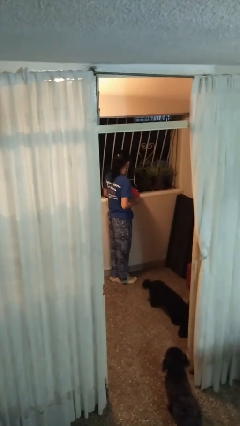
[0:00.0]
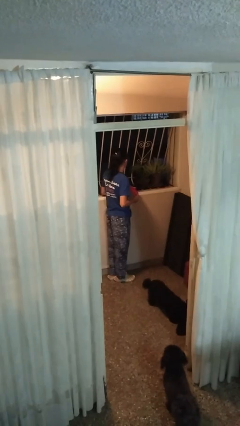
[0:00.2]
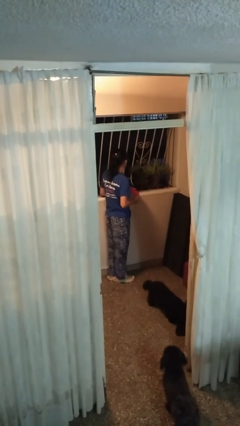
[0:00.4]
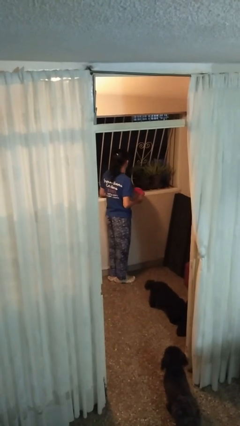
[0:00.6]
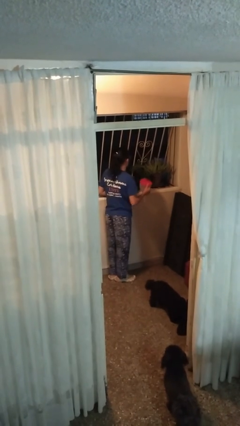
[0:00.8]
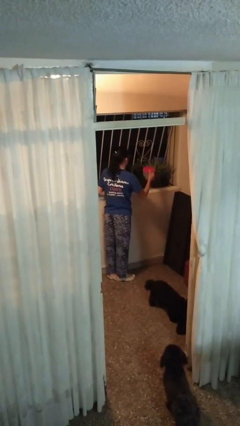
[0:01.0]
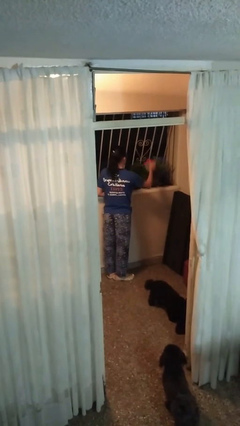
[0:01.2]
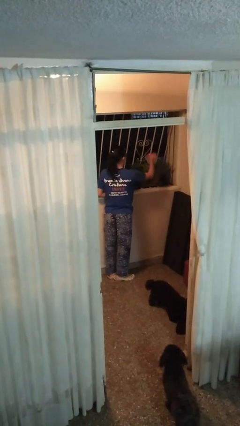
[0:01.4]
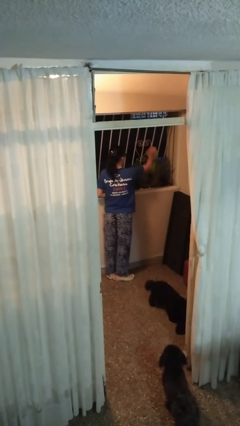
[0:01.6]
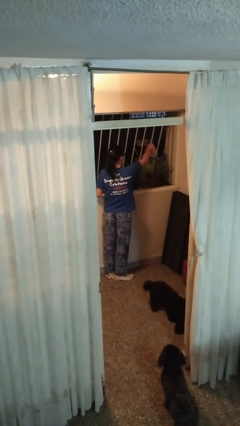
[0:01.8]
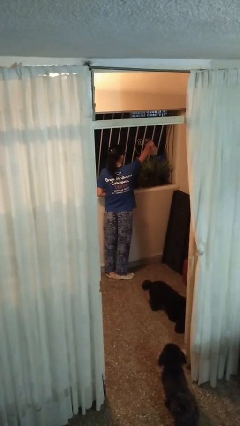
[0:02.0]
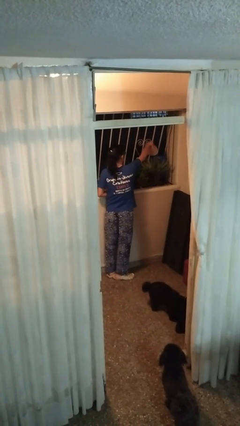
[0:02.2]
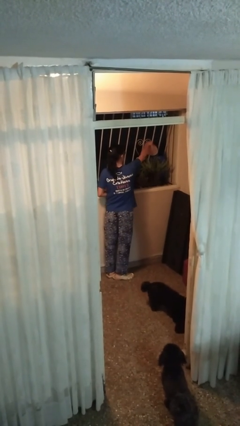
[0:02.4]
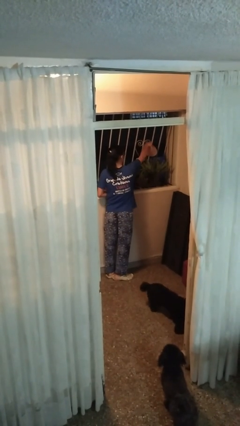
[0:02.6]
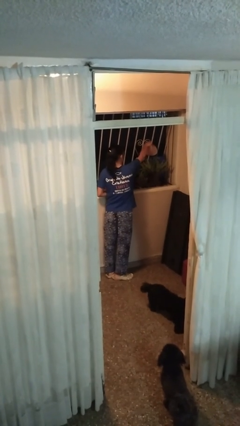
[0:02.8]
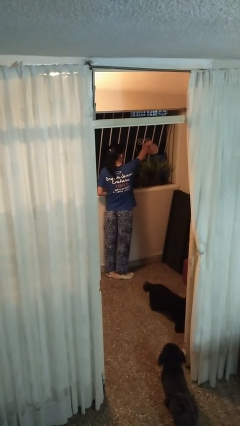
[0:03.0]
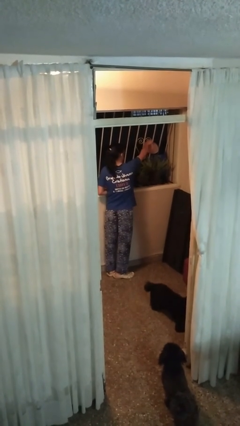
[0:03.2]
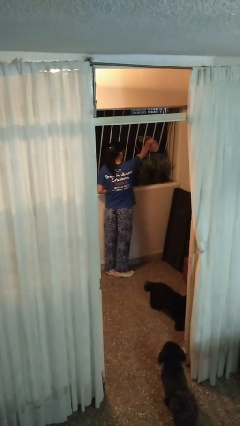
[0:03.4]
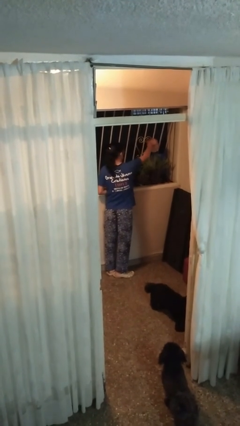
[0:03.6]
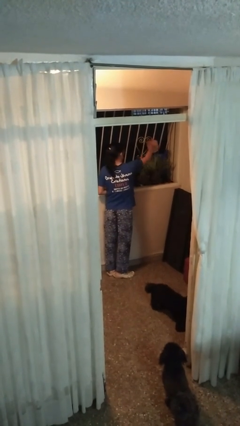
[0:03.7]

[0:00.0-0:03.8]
person waters houseplant

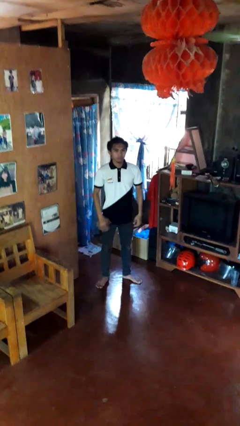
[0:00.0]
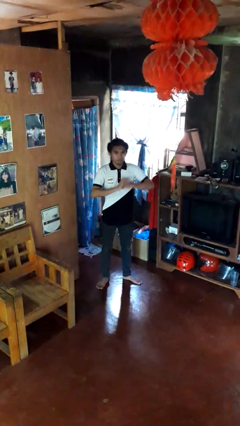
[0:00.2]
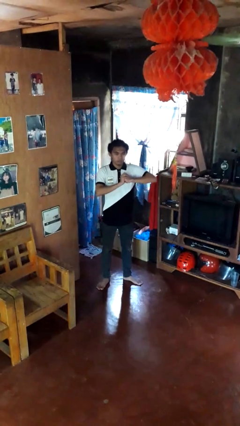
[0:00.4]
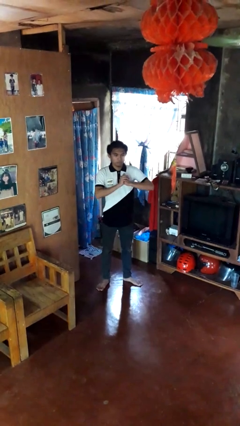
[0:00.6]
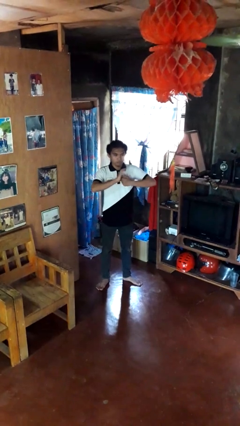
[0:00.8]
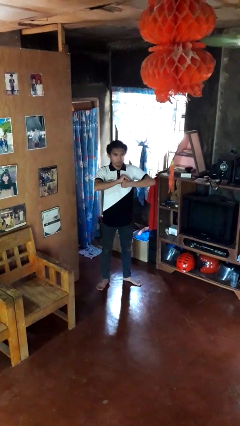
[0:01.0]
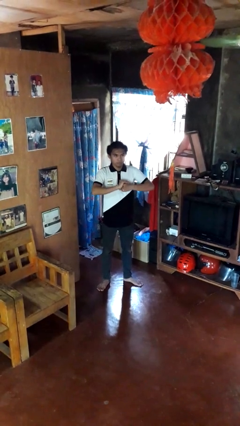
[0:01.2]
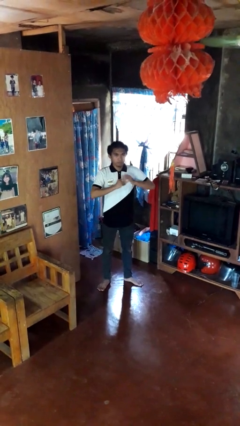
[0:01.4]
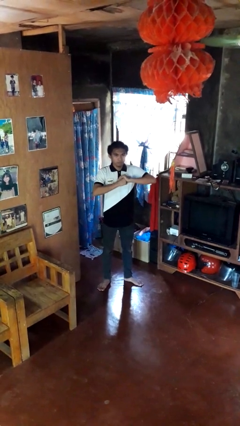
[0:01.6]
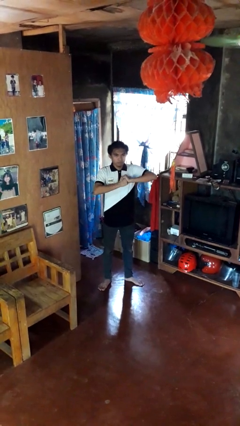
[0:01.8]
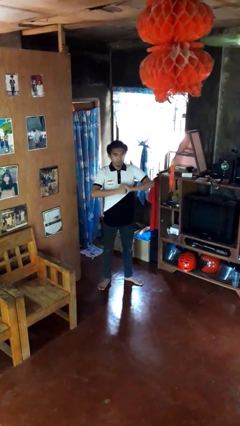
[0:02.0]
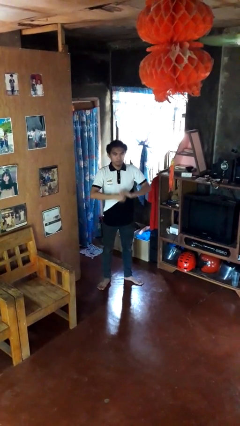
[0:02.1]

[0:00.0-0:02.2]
person cracks knuckles

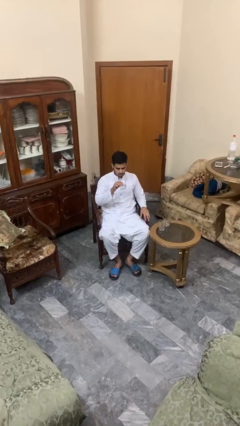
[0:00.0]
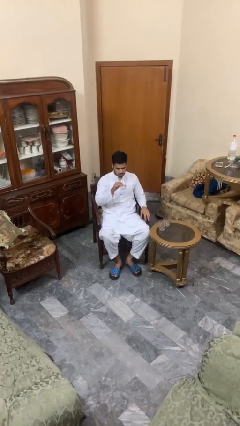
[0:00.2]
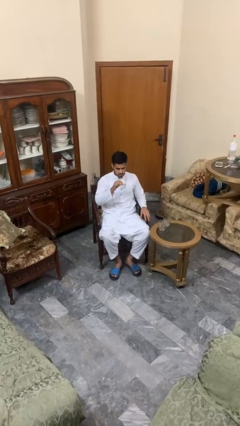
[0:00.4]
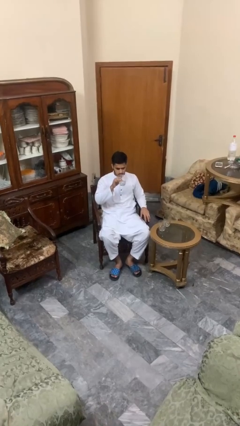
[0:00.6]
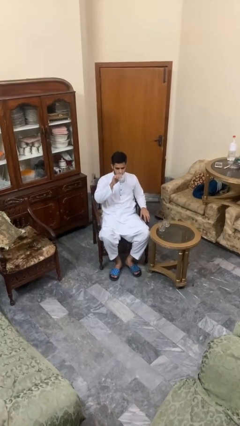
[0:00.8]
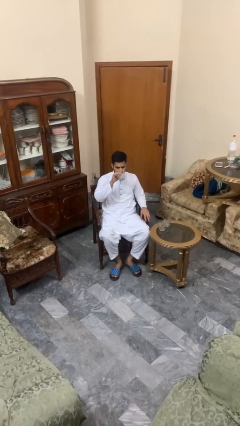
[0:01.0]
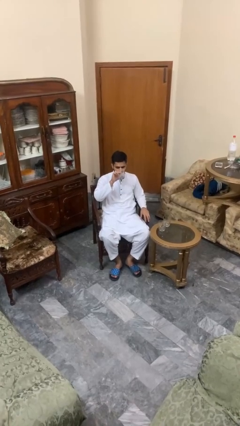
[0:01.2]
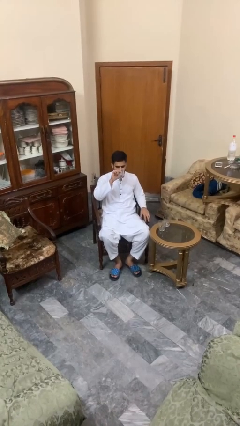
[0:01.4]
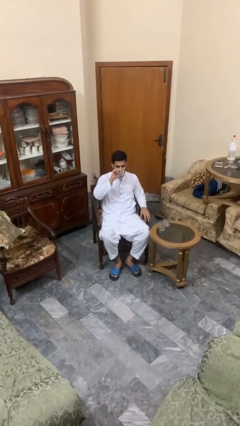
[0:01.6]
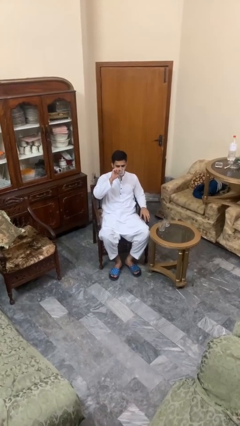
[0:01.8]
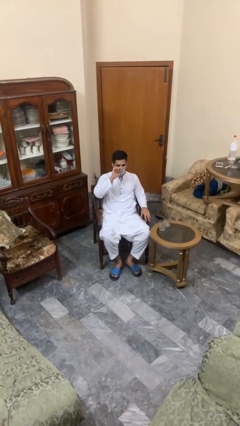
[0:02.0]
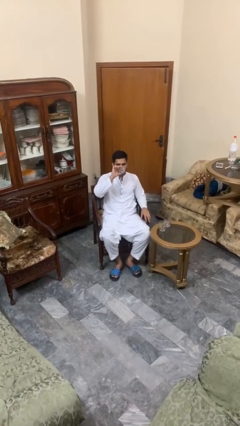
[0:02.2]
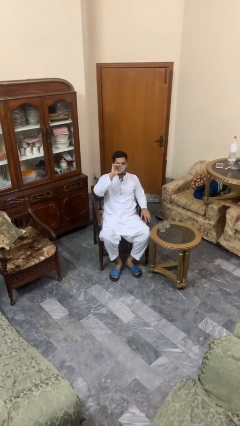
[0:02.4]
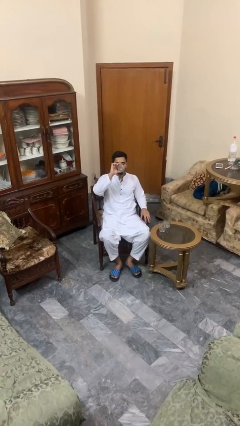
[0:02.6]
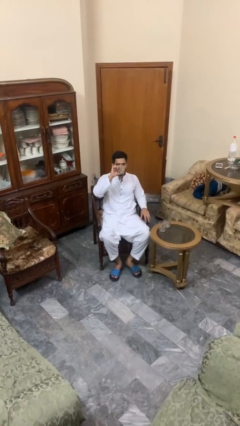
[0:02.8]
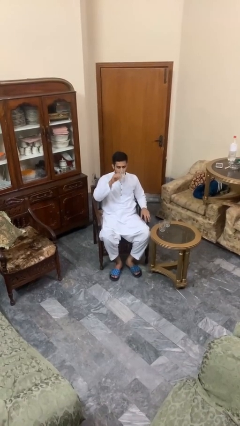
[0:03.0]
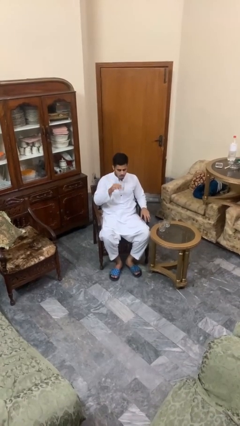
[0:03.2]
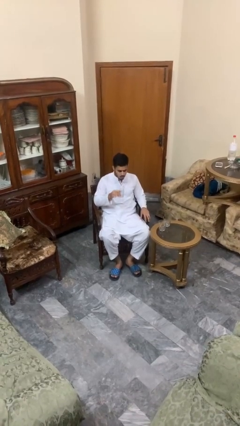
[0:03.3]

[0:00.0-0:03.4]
person drinks from shotglass

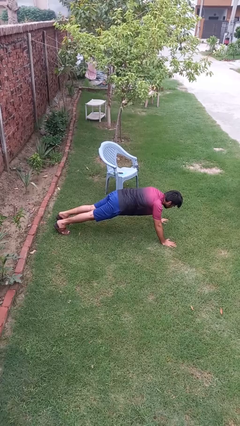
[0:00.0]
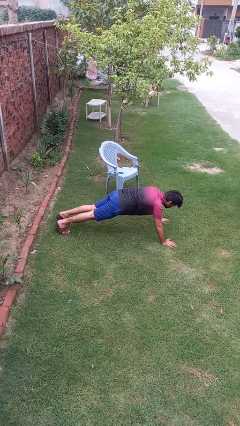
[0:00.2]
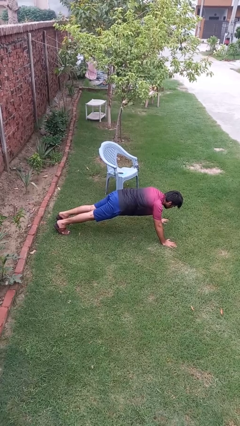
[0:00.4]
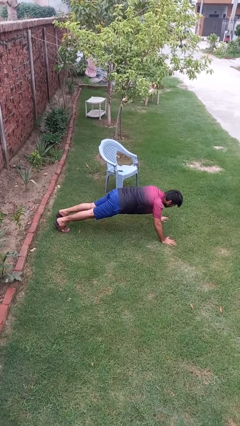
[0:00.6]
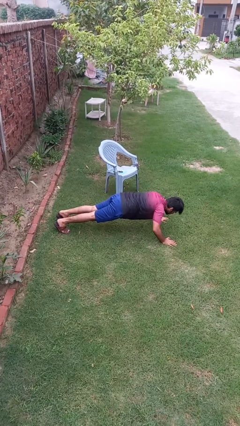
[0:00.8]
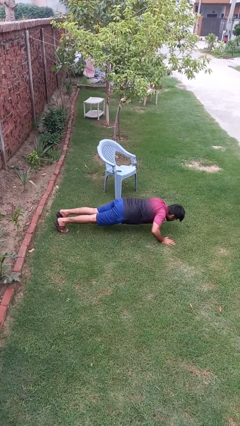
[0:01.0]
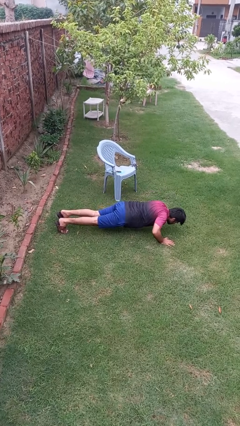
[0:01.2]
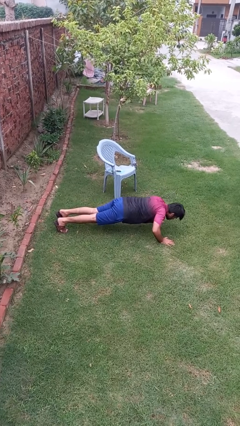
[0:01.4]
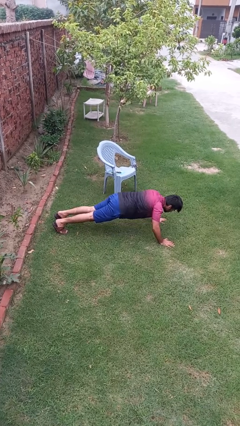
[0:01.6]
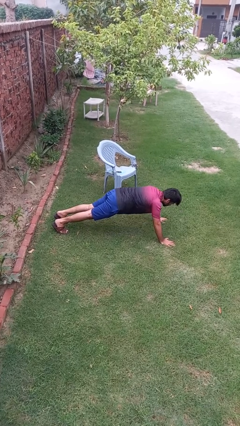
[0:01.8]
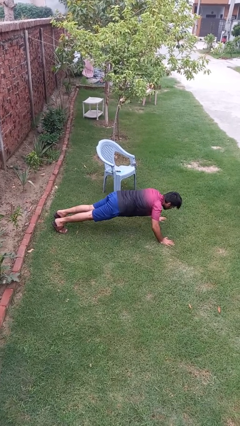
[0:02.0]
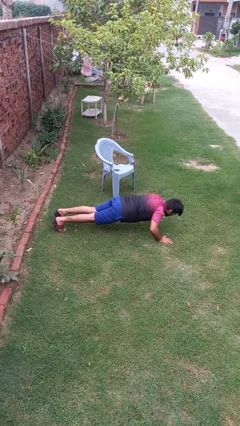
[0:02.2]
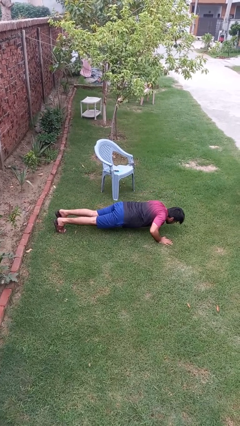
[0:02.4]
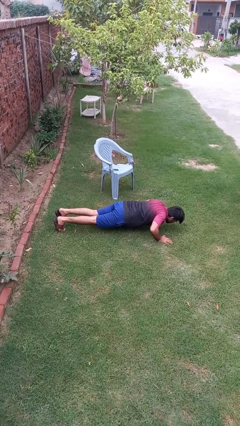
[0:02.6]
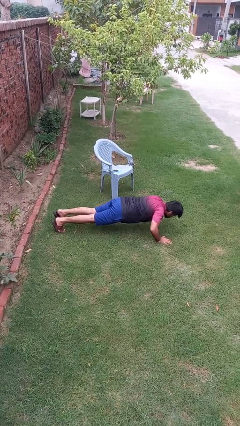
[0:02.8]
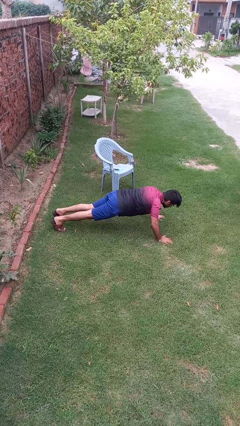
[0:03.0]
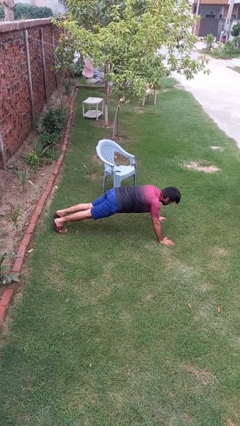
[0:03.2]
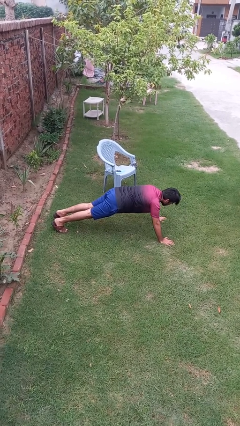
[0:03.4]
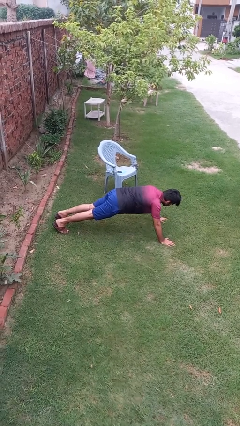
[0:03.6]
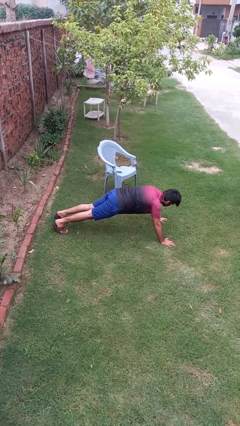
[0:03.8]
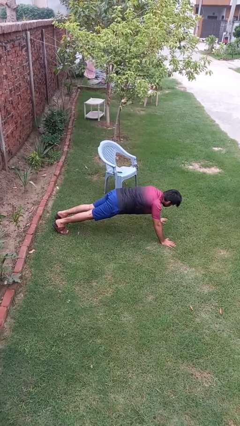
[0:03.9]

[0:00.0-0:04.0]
person exercises with pushup

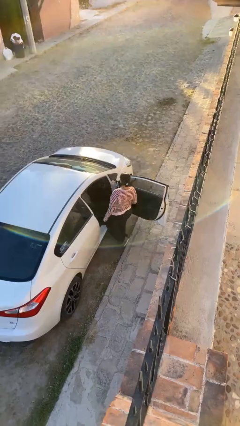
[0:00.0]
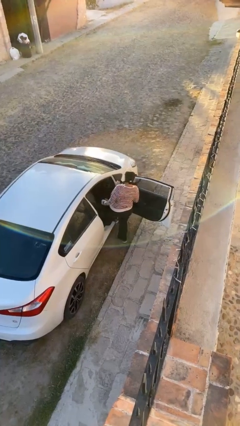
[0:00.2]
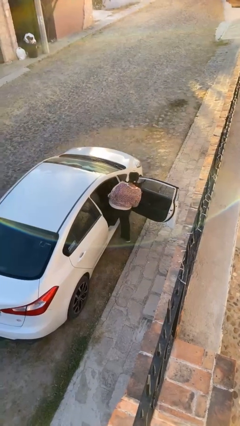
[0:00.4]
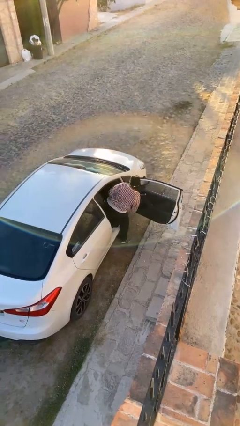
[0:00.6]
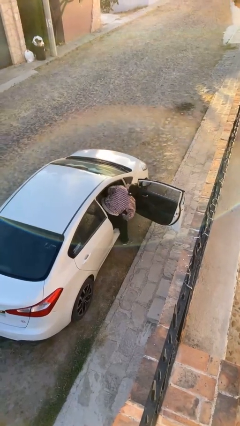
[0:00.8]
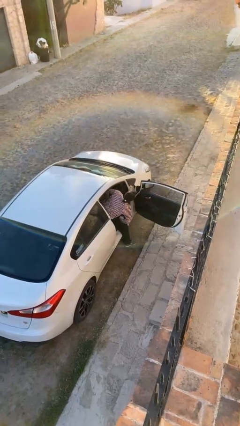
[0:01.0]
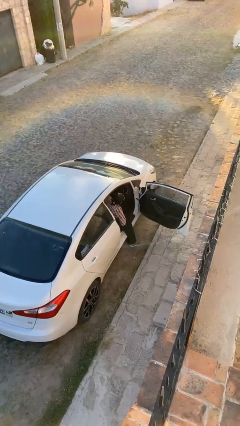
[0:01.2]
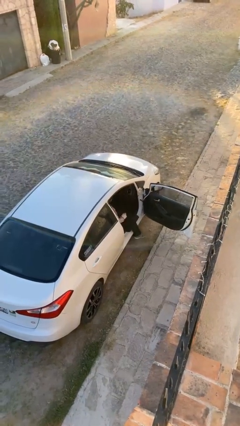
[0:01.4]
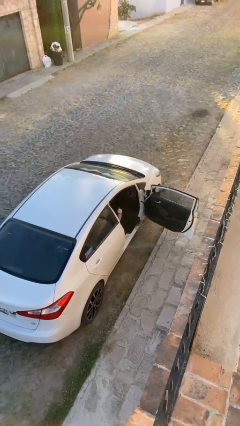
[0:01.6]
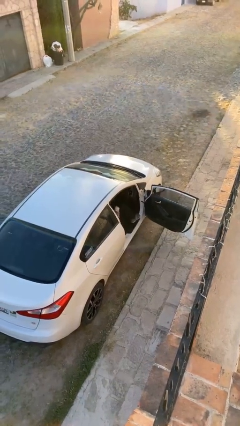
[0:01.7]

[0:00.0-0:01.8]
person enters car

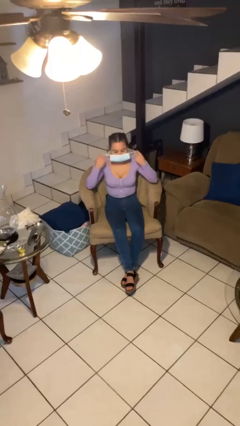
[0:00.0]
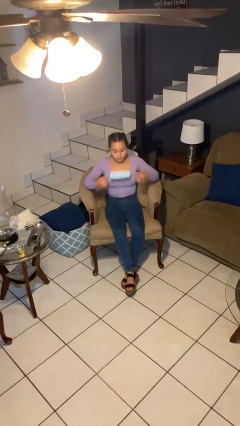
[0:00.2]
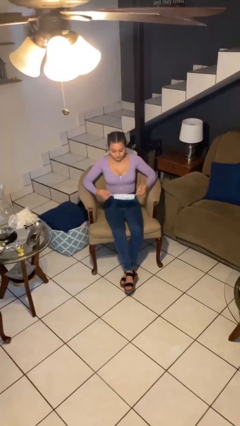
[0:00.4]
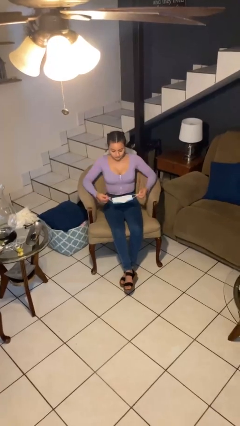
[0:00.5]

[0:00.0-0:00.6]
person takes off facemask

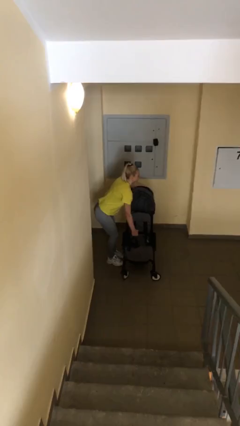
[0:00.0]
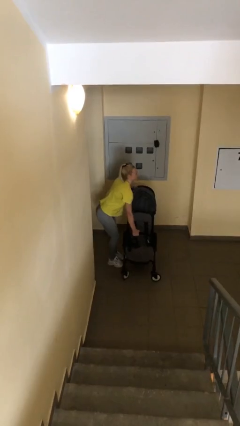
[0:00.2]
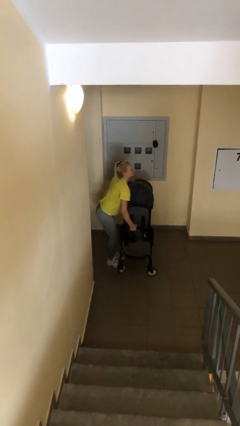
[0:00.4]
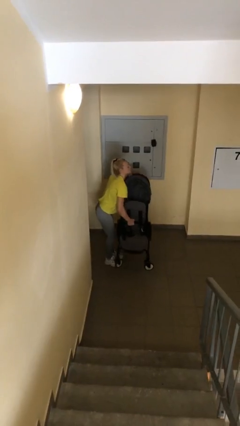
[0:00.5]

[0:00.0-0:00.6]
person picks up object from floor

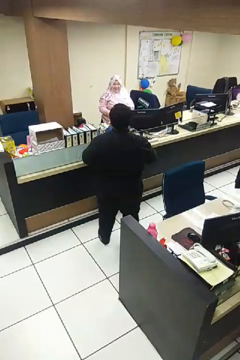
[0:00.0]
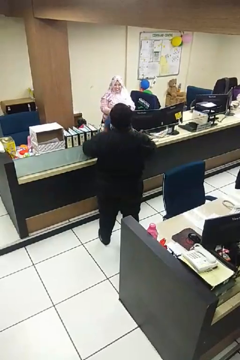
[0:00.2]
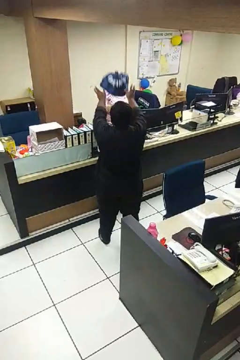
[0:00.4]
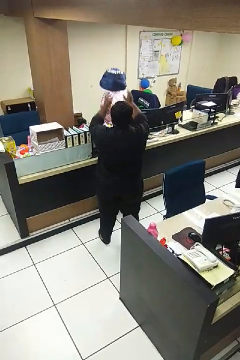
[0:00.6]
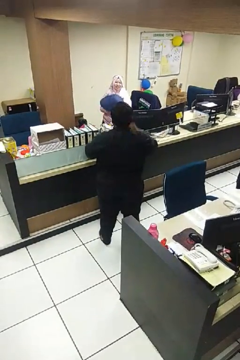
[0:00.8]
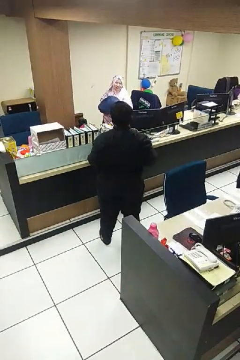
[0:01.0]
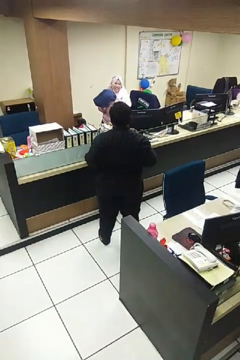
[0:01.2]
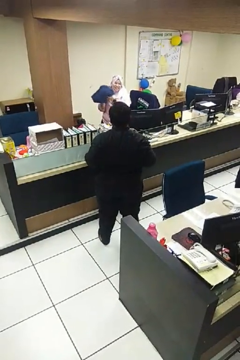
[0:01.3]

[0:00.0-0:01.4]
person throws object to person
